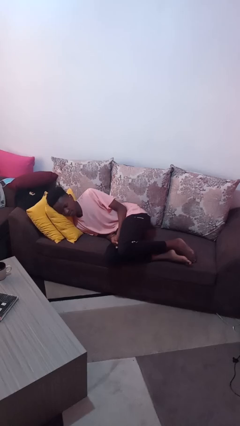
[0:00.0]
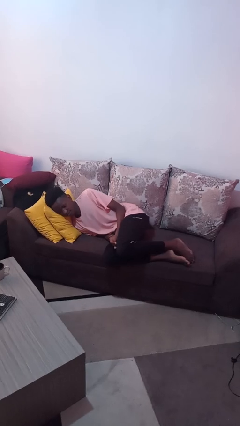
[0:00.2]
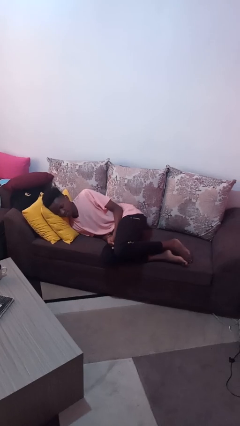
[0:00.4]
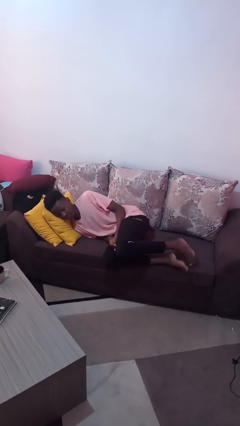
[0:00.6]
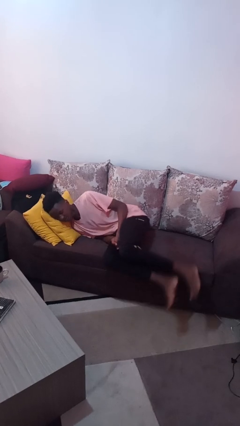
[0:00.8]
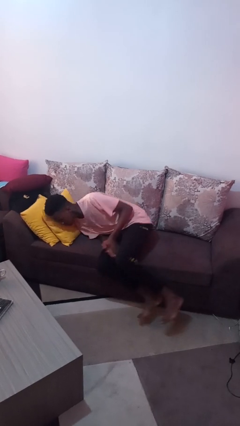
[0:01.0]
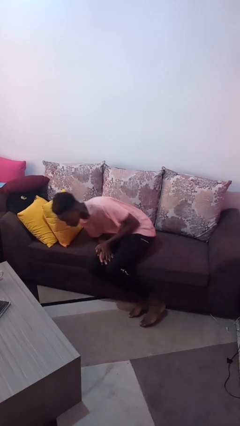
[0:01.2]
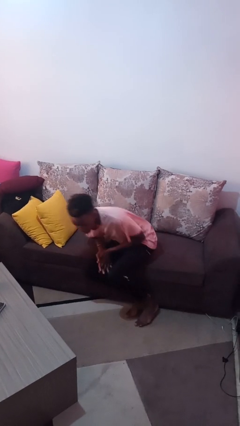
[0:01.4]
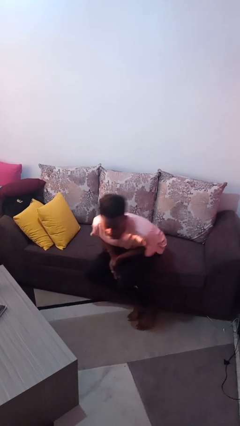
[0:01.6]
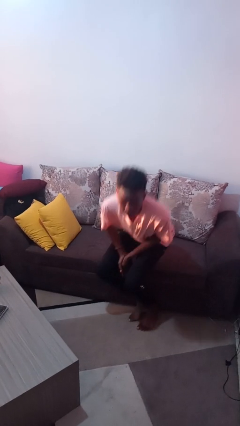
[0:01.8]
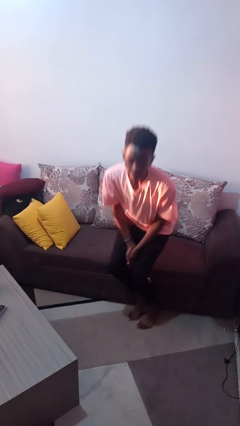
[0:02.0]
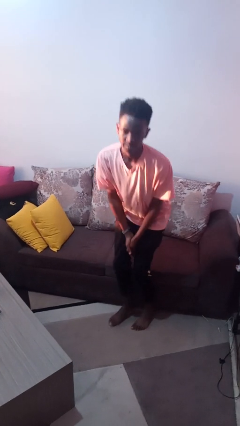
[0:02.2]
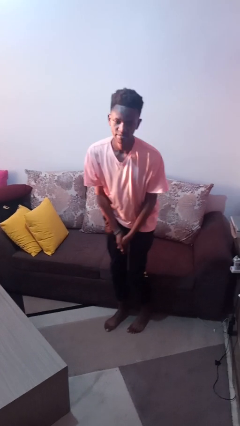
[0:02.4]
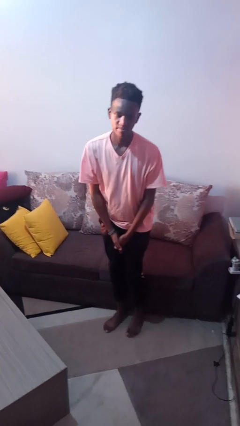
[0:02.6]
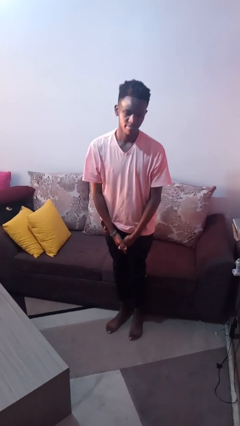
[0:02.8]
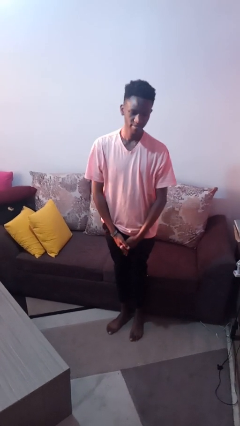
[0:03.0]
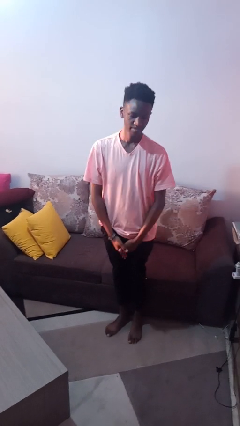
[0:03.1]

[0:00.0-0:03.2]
person stands up

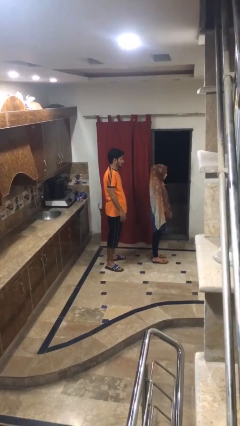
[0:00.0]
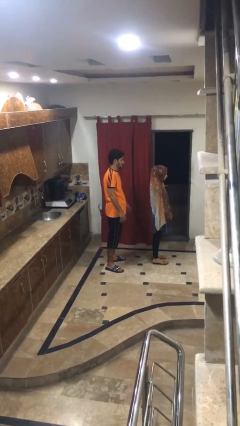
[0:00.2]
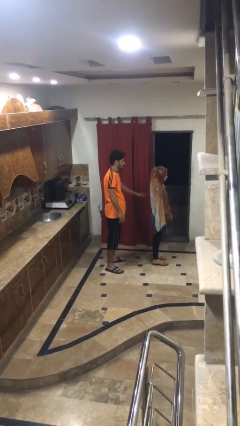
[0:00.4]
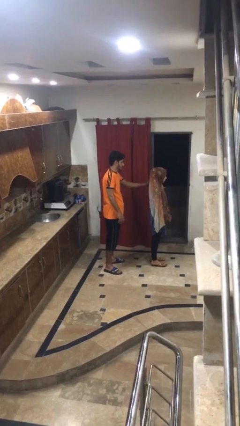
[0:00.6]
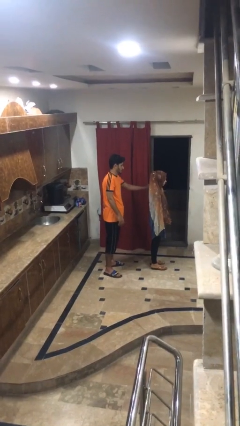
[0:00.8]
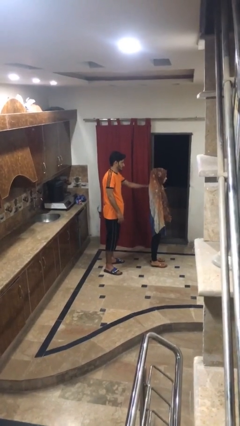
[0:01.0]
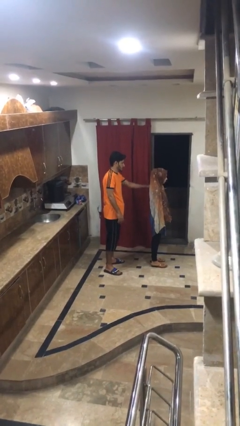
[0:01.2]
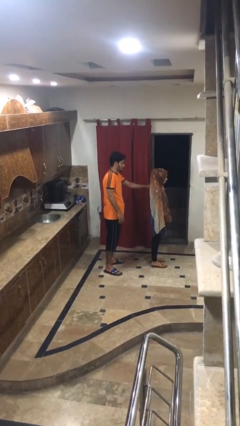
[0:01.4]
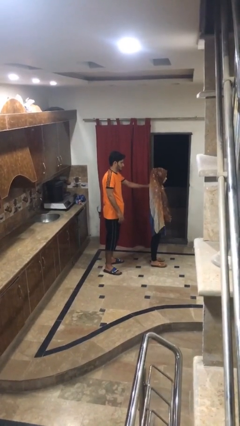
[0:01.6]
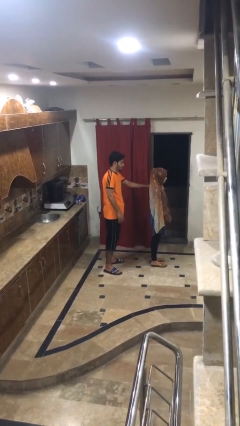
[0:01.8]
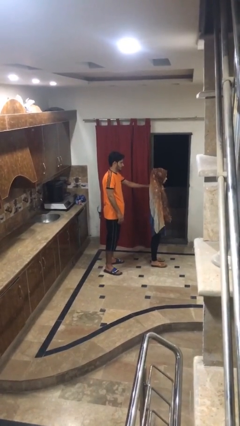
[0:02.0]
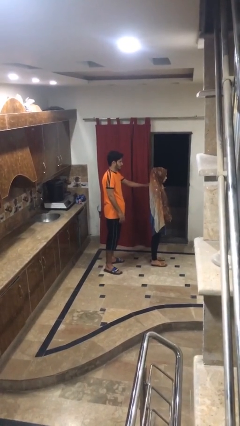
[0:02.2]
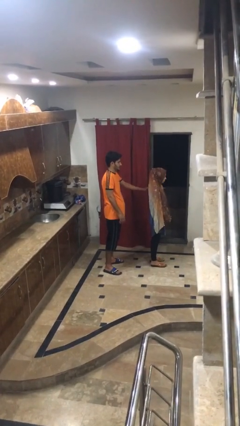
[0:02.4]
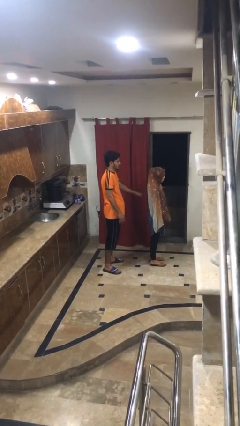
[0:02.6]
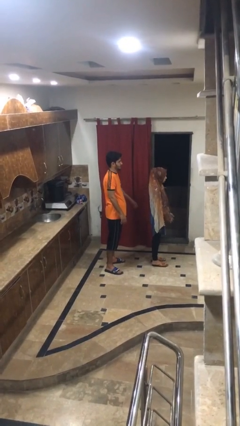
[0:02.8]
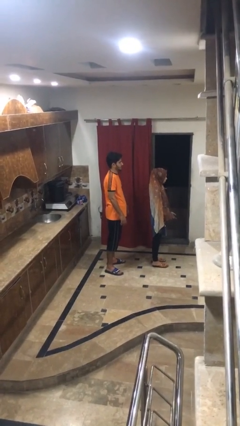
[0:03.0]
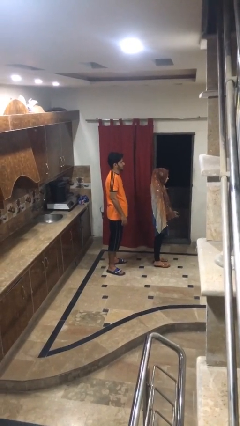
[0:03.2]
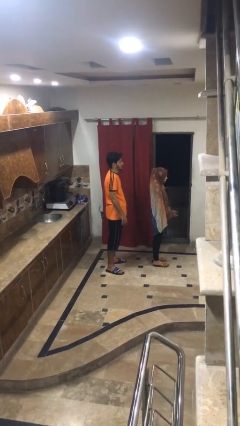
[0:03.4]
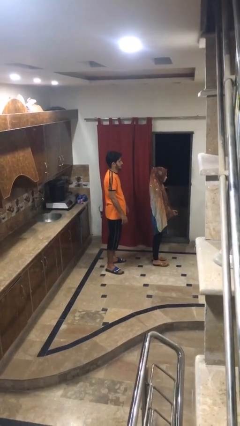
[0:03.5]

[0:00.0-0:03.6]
person touches back of person

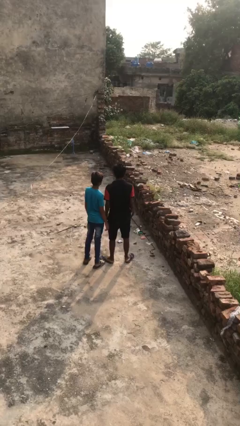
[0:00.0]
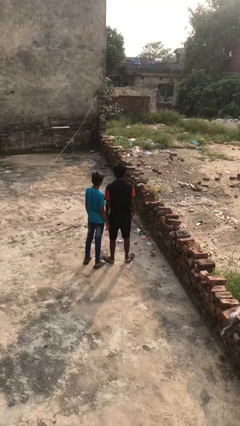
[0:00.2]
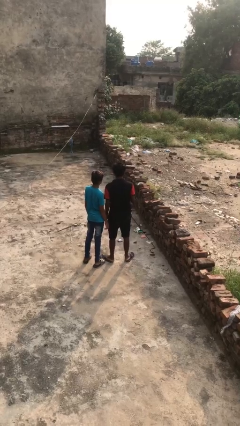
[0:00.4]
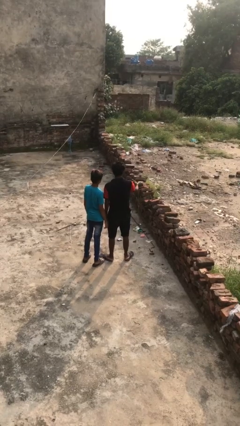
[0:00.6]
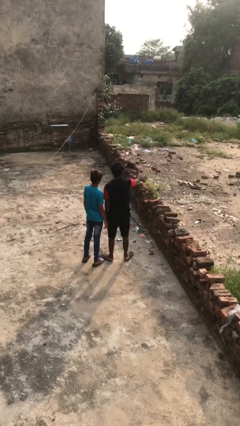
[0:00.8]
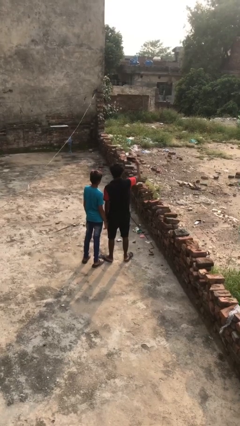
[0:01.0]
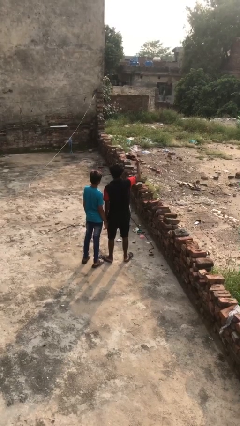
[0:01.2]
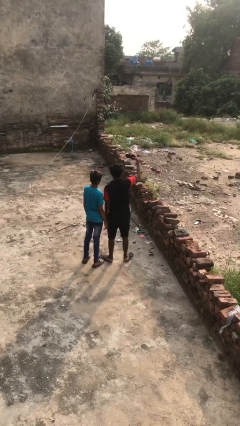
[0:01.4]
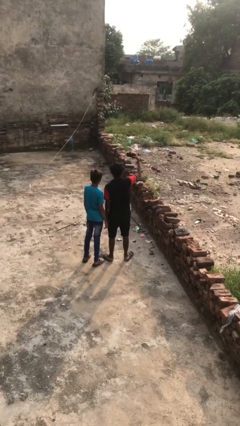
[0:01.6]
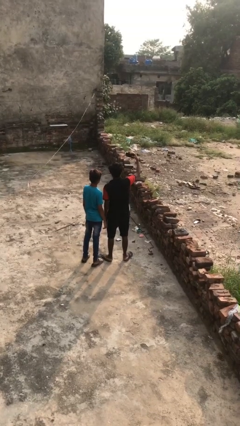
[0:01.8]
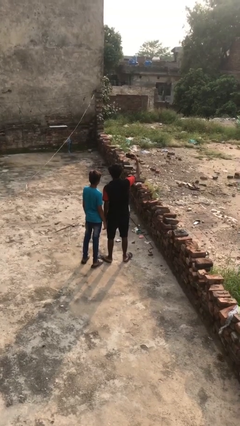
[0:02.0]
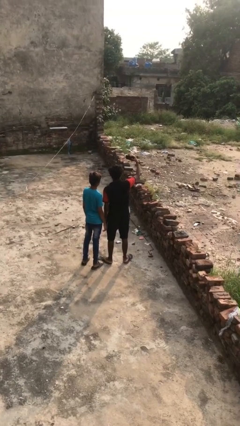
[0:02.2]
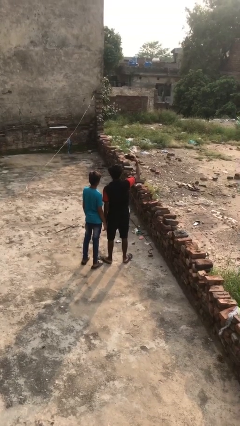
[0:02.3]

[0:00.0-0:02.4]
person takes selfie with person

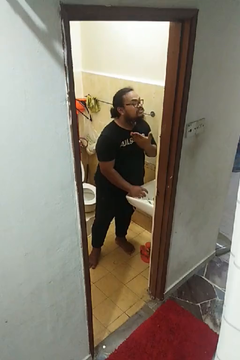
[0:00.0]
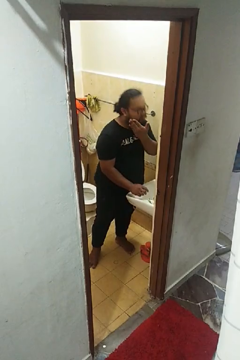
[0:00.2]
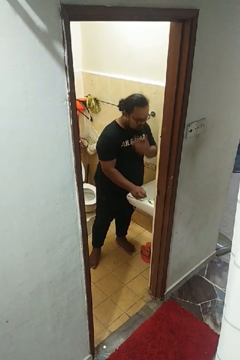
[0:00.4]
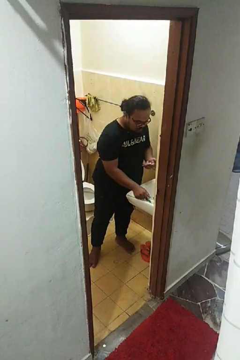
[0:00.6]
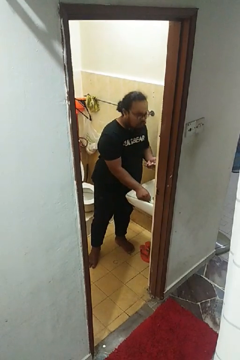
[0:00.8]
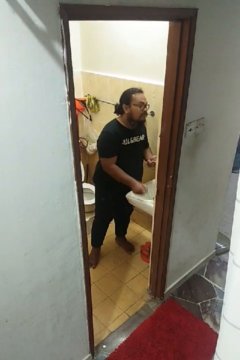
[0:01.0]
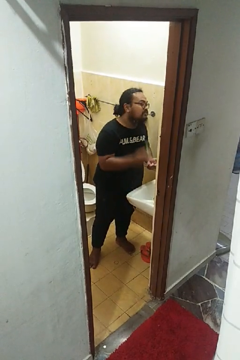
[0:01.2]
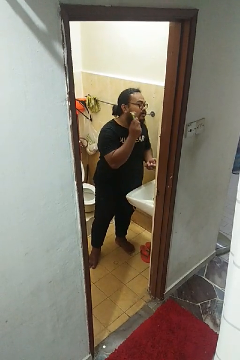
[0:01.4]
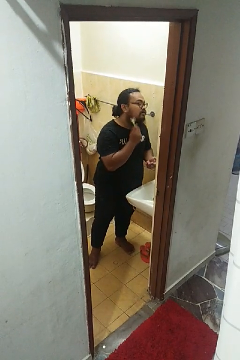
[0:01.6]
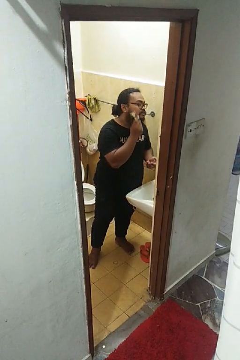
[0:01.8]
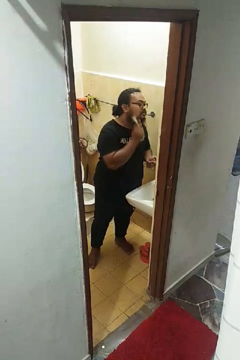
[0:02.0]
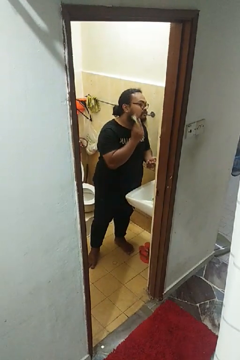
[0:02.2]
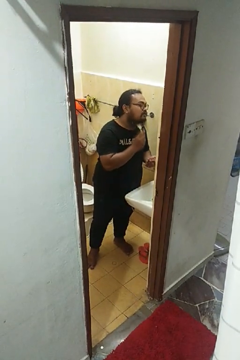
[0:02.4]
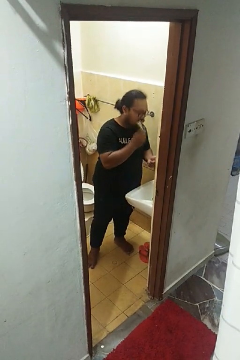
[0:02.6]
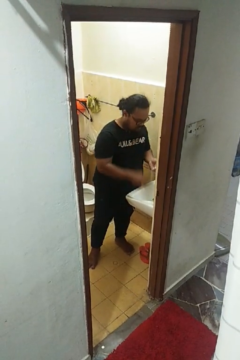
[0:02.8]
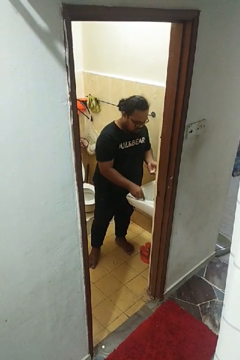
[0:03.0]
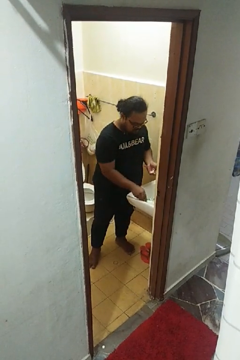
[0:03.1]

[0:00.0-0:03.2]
person shaves face

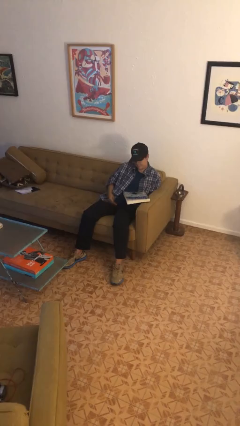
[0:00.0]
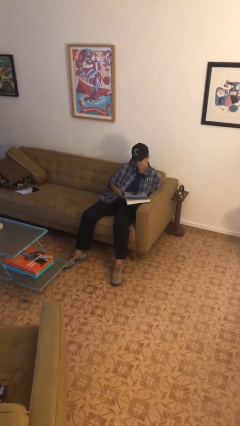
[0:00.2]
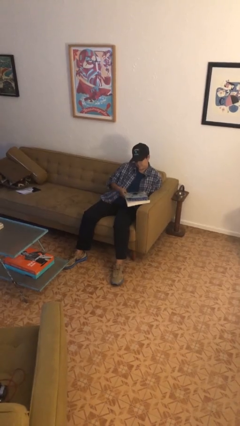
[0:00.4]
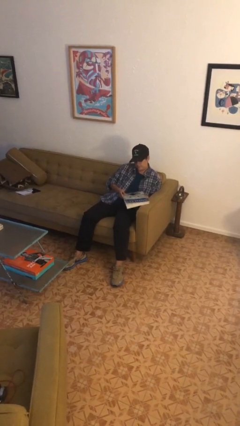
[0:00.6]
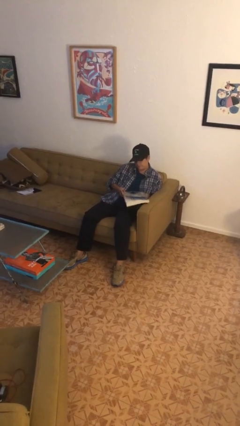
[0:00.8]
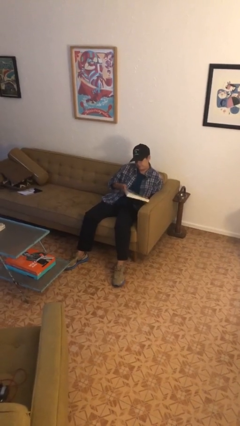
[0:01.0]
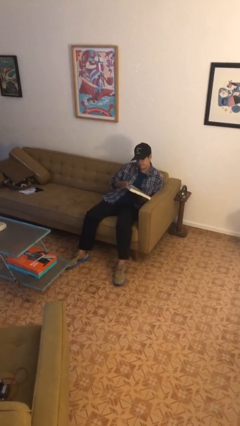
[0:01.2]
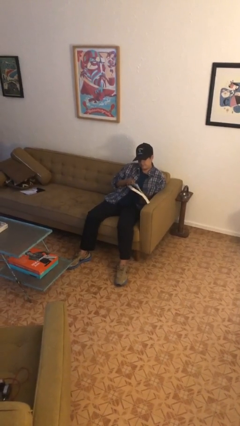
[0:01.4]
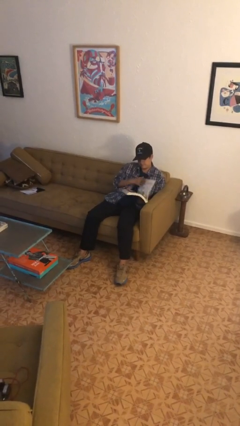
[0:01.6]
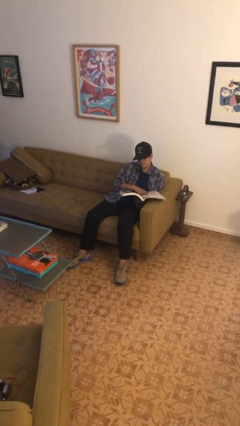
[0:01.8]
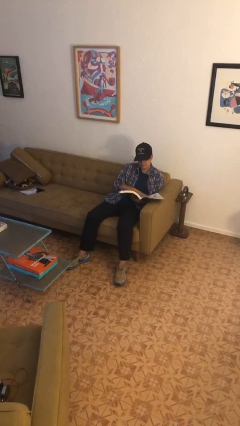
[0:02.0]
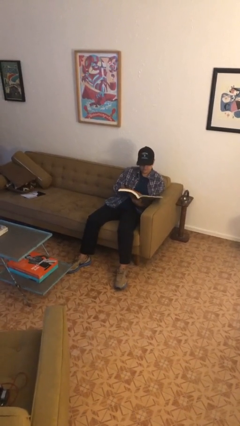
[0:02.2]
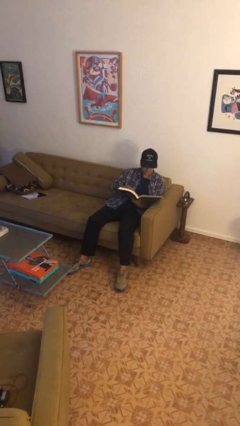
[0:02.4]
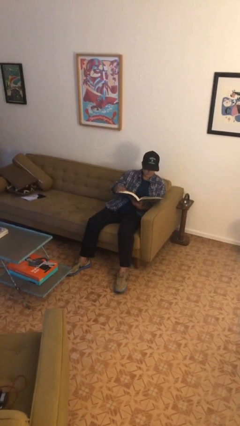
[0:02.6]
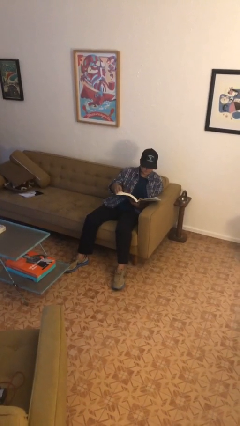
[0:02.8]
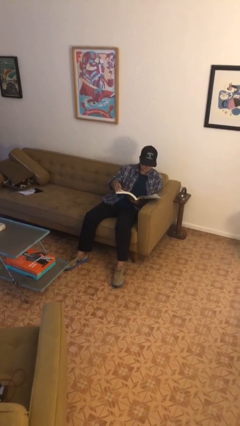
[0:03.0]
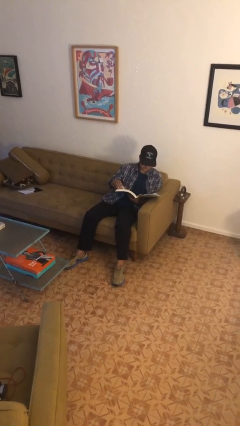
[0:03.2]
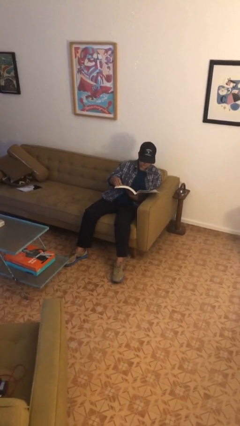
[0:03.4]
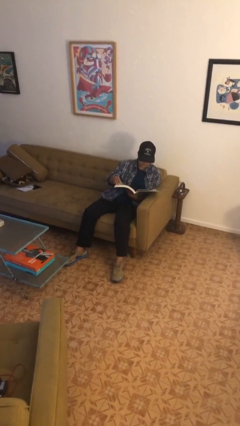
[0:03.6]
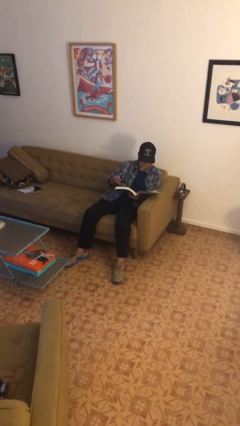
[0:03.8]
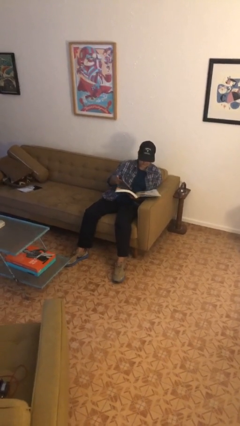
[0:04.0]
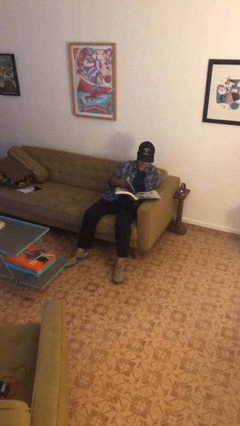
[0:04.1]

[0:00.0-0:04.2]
person reads book

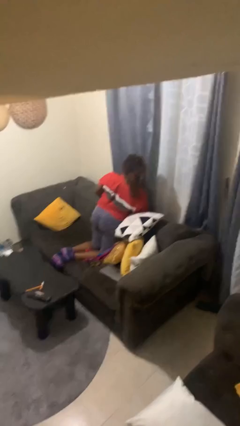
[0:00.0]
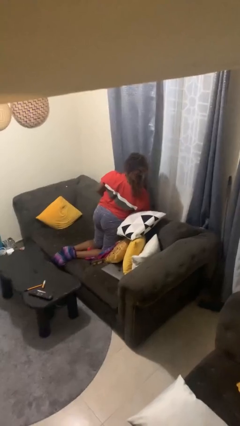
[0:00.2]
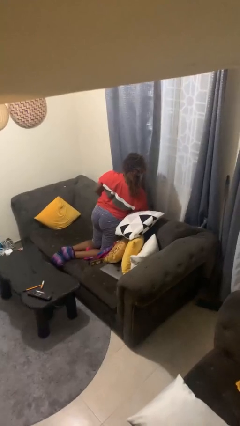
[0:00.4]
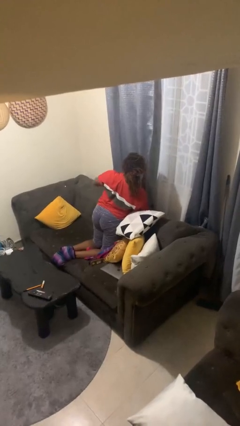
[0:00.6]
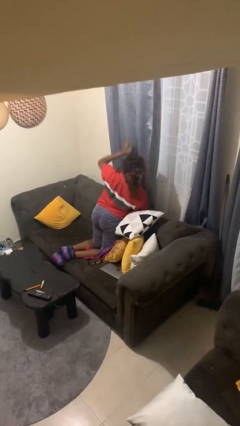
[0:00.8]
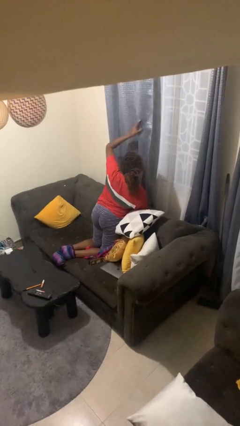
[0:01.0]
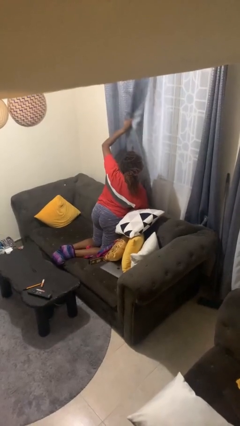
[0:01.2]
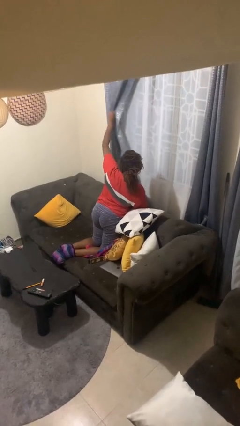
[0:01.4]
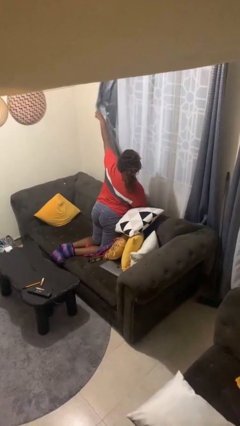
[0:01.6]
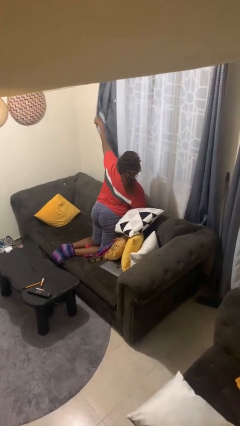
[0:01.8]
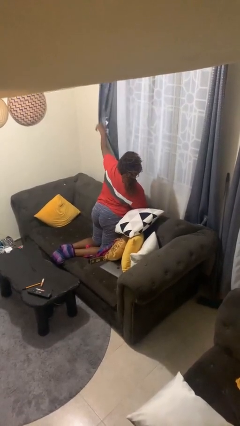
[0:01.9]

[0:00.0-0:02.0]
person opens curtains
